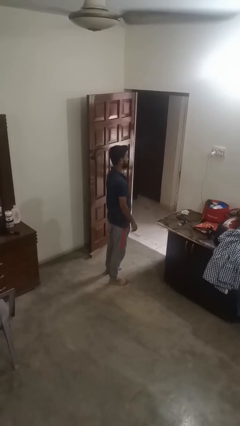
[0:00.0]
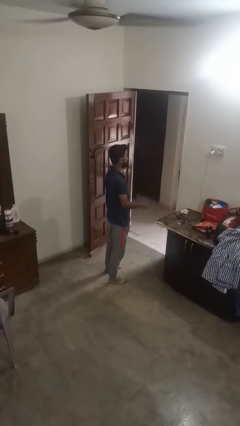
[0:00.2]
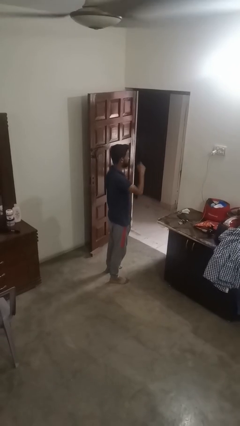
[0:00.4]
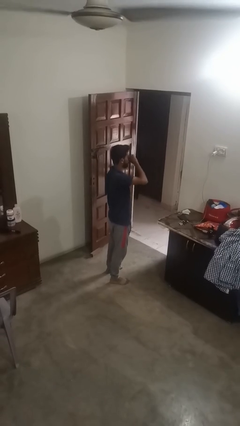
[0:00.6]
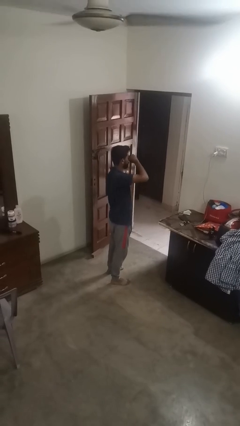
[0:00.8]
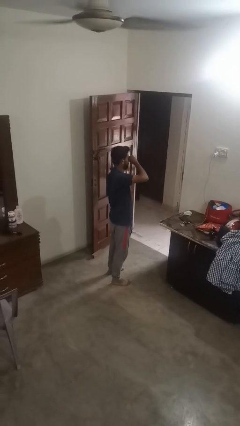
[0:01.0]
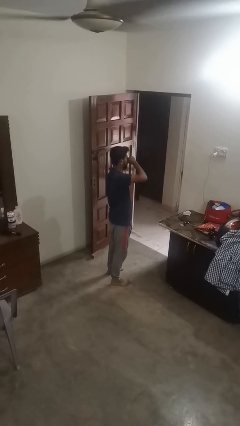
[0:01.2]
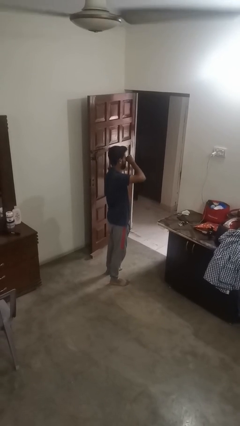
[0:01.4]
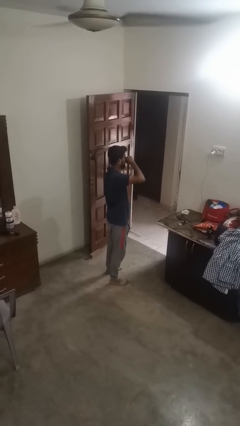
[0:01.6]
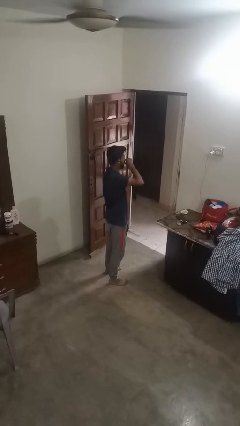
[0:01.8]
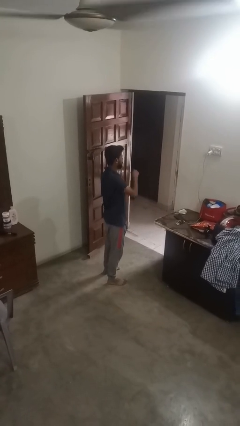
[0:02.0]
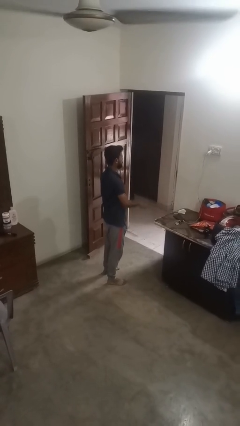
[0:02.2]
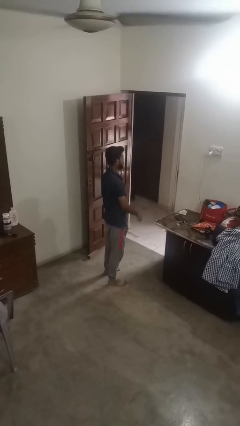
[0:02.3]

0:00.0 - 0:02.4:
person rubs eyes

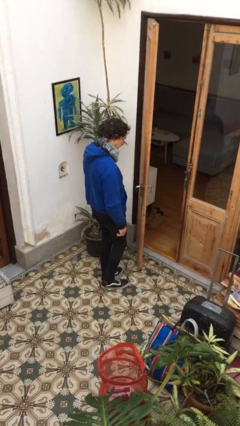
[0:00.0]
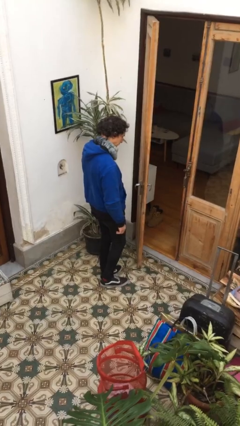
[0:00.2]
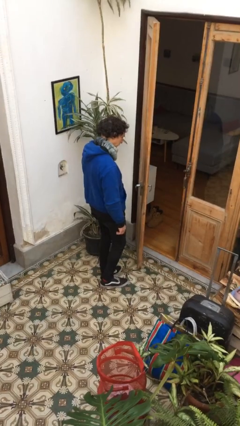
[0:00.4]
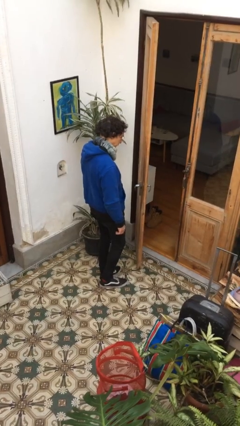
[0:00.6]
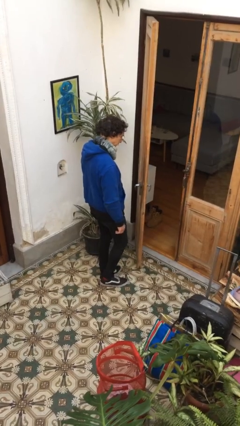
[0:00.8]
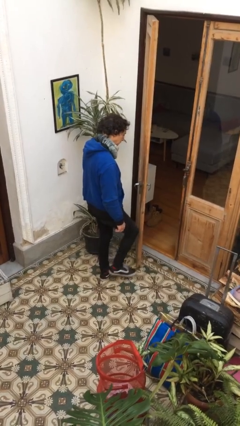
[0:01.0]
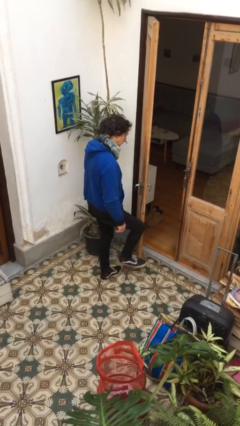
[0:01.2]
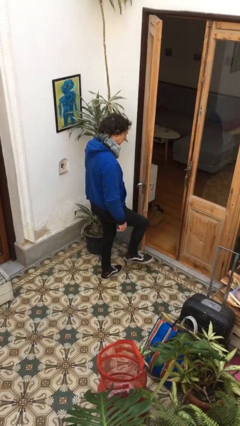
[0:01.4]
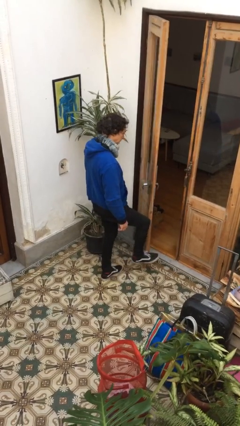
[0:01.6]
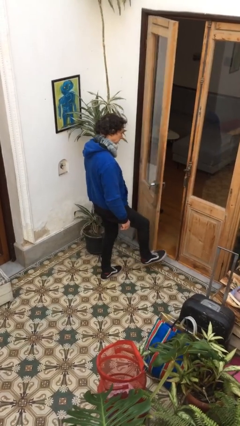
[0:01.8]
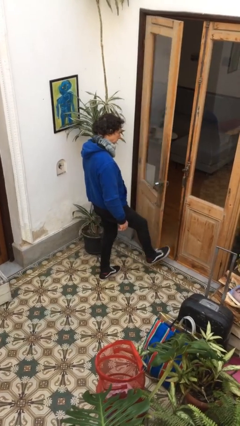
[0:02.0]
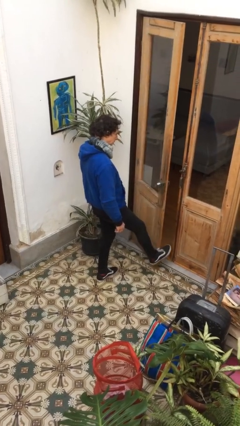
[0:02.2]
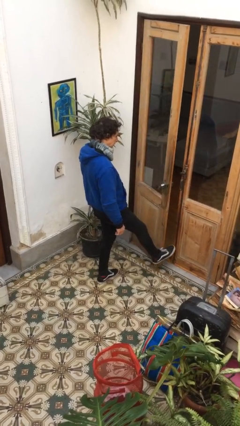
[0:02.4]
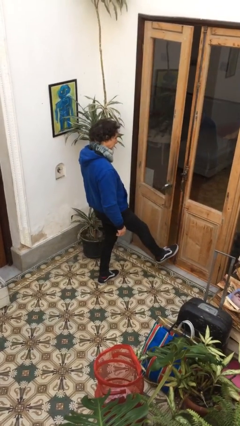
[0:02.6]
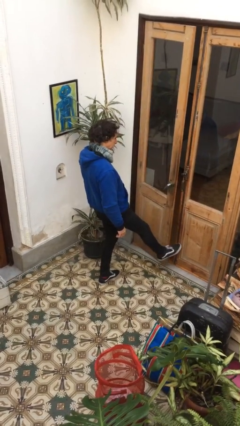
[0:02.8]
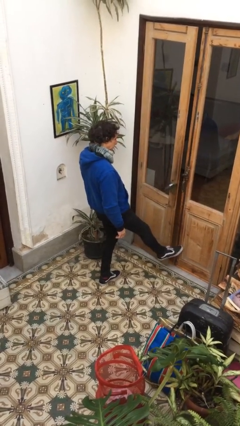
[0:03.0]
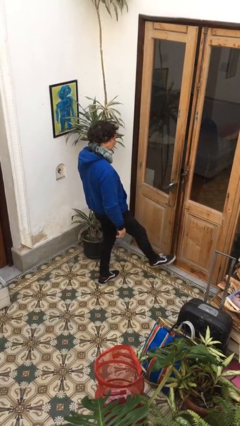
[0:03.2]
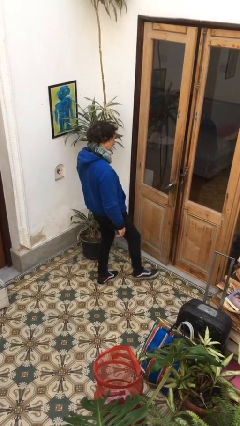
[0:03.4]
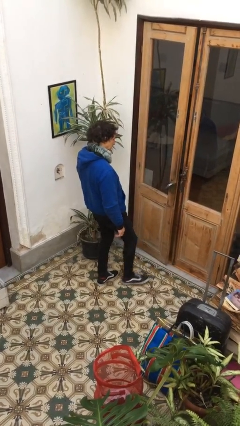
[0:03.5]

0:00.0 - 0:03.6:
person closes door with foot

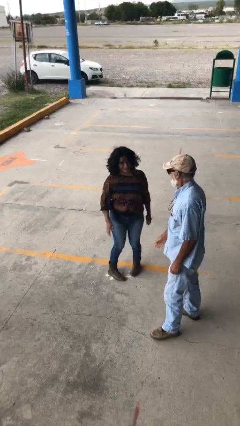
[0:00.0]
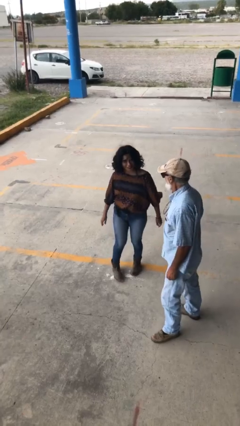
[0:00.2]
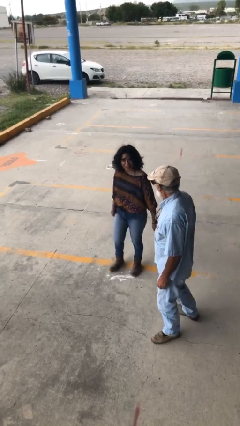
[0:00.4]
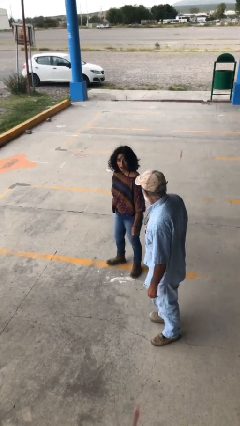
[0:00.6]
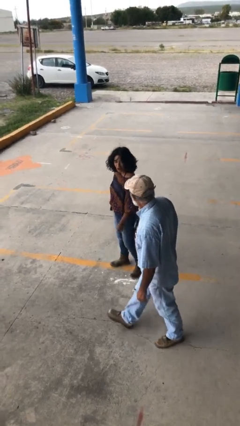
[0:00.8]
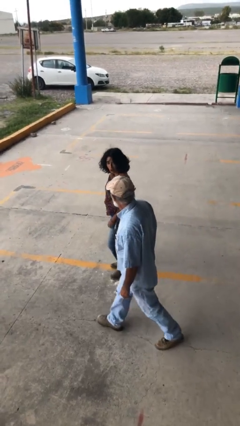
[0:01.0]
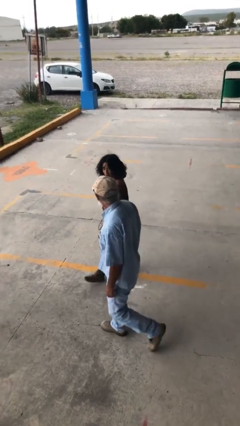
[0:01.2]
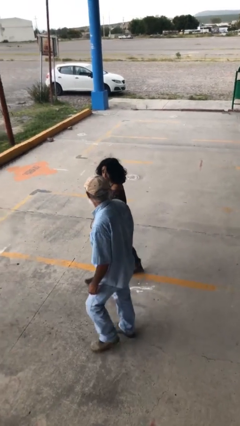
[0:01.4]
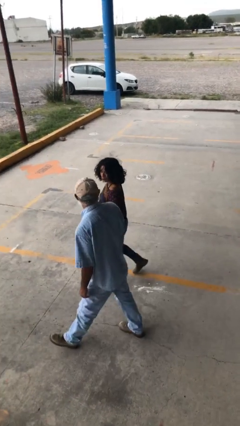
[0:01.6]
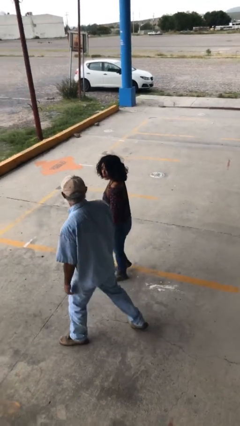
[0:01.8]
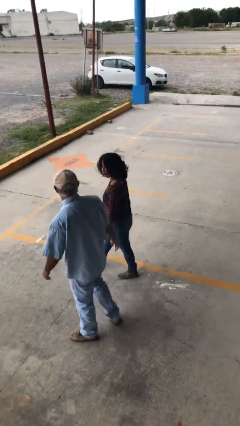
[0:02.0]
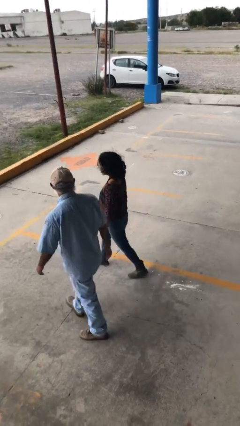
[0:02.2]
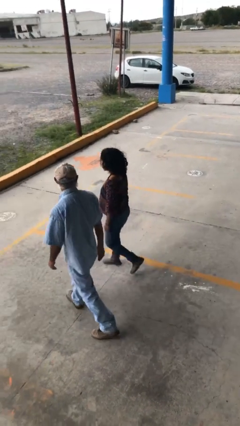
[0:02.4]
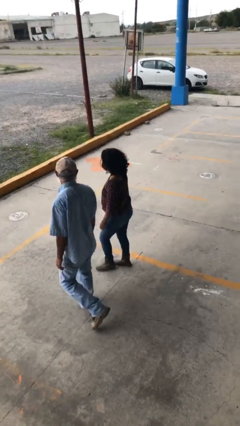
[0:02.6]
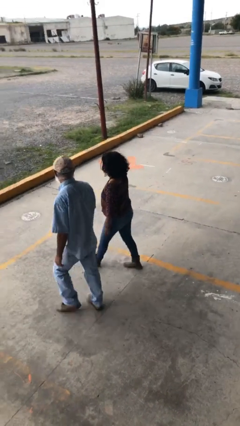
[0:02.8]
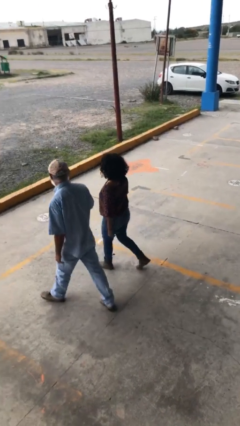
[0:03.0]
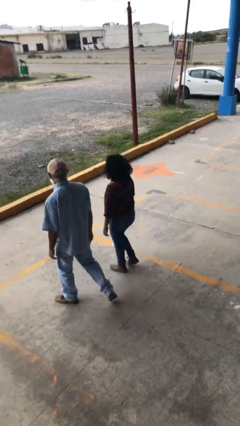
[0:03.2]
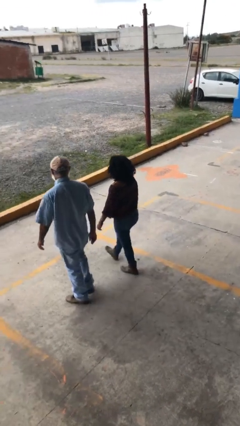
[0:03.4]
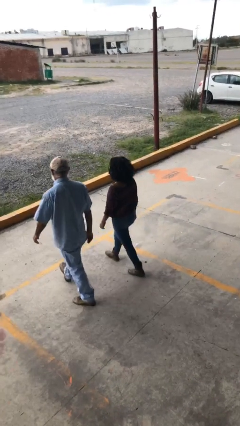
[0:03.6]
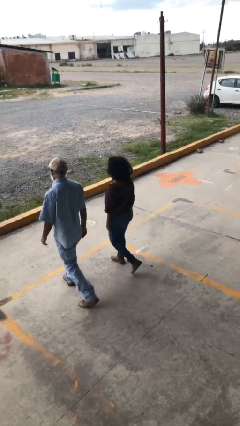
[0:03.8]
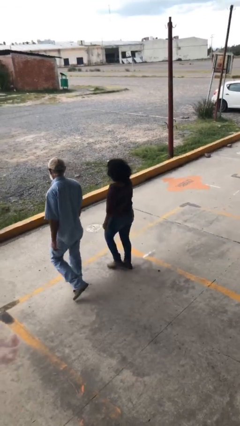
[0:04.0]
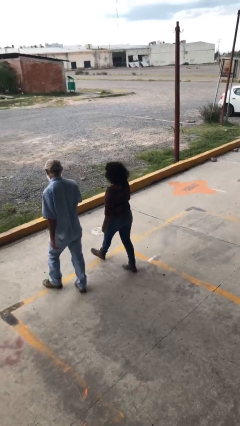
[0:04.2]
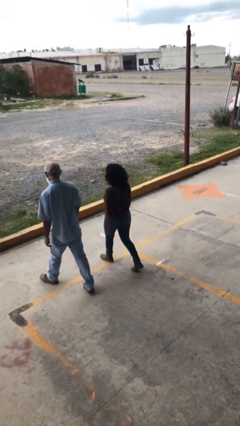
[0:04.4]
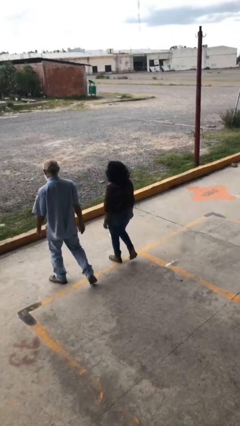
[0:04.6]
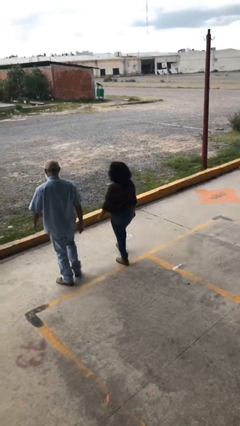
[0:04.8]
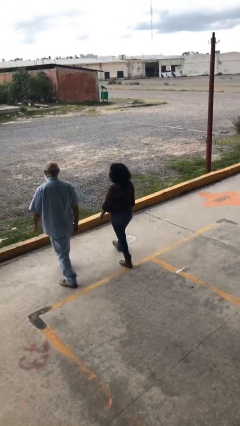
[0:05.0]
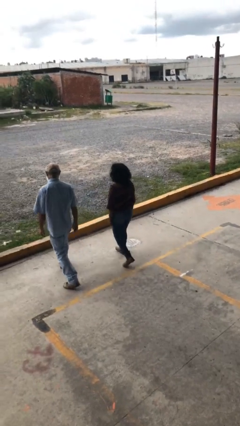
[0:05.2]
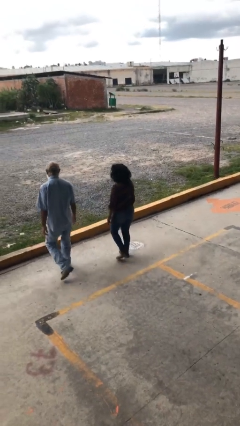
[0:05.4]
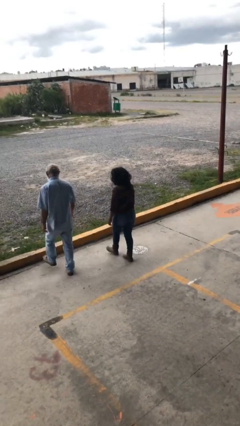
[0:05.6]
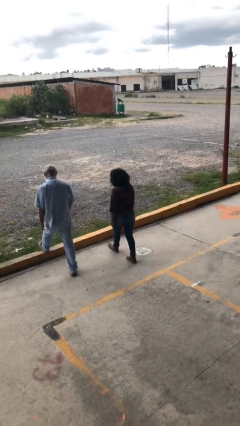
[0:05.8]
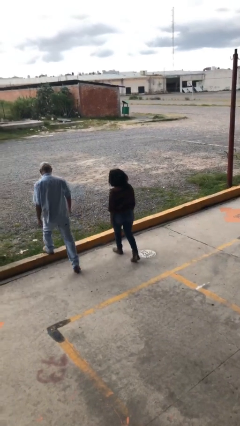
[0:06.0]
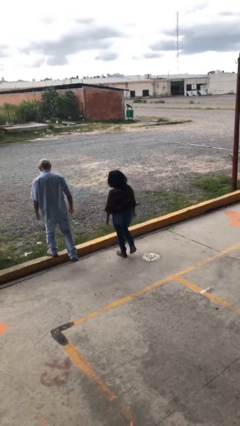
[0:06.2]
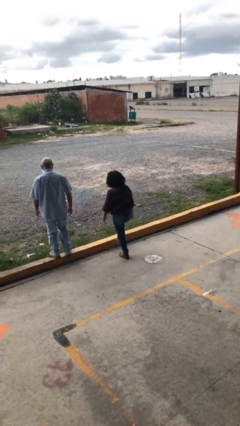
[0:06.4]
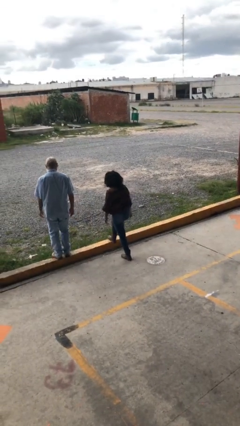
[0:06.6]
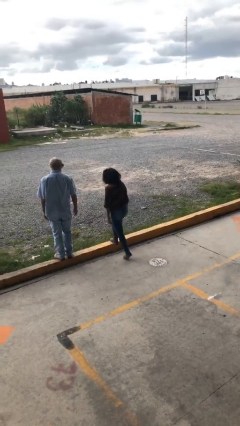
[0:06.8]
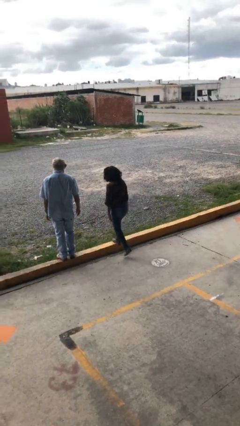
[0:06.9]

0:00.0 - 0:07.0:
person talks to person

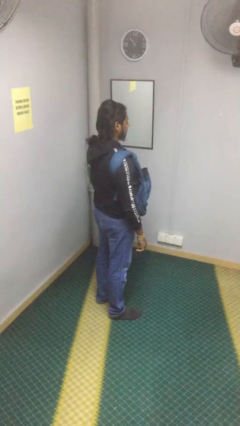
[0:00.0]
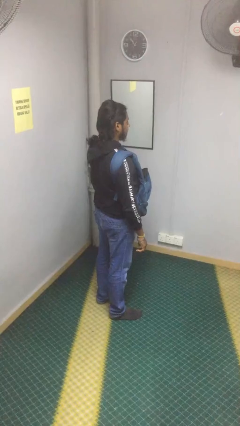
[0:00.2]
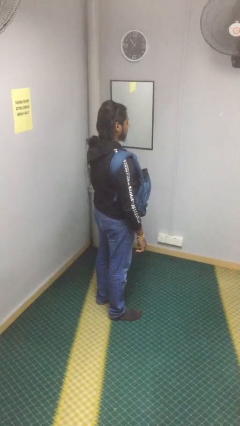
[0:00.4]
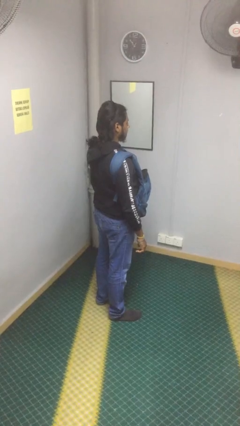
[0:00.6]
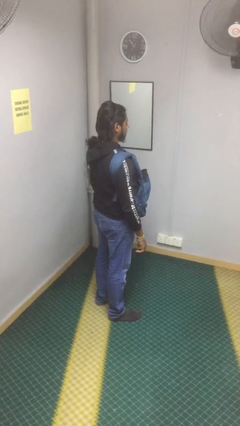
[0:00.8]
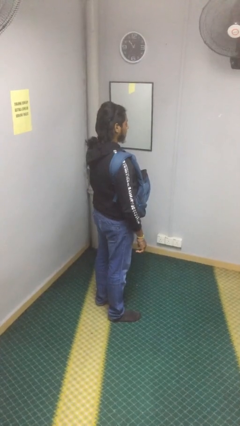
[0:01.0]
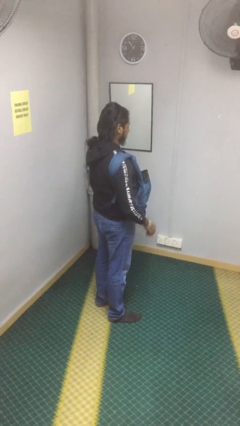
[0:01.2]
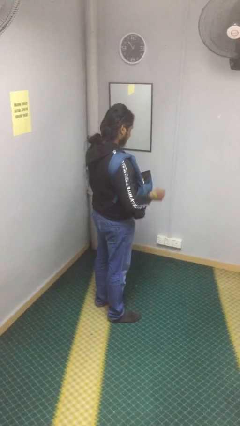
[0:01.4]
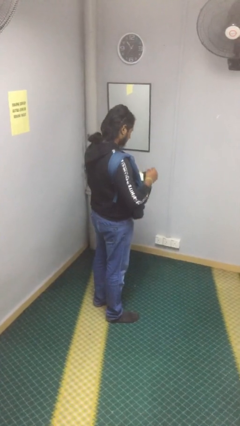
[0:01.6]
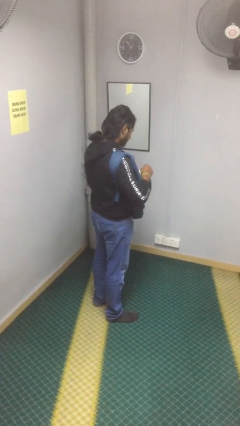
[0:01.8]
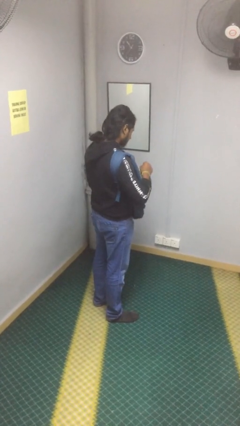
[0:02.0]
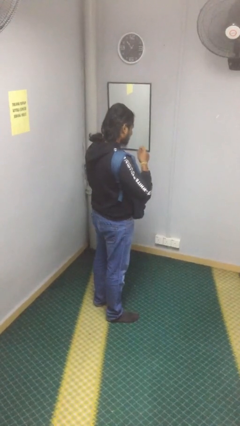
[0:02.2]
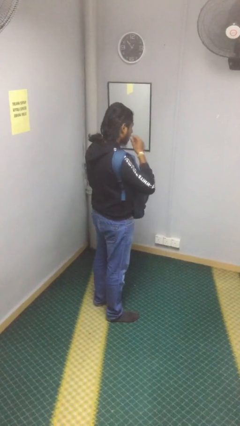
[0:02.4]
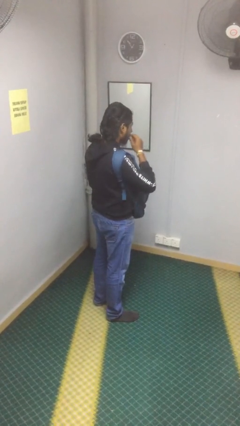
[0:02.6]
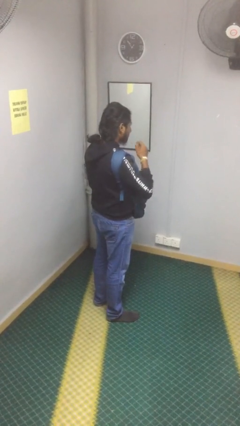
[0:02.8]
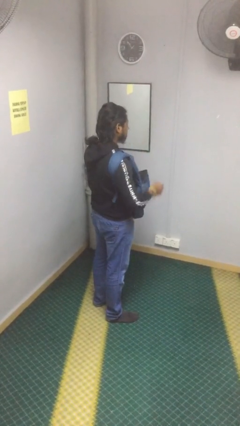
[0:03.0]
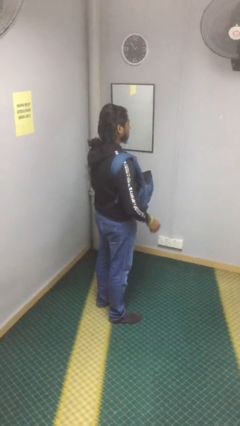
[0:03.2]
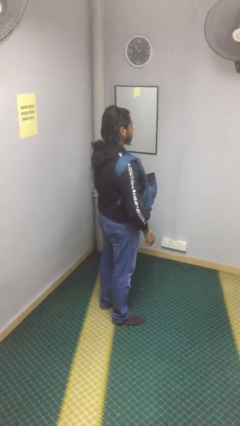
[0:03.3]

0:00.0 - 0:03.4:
person eats snack from bag

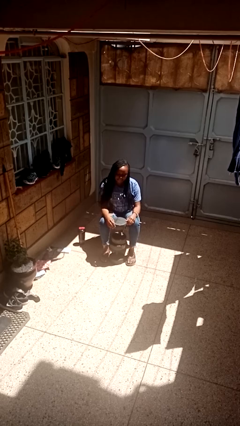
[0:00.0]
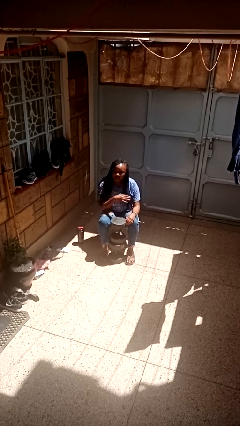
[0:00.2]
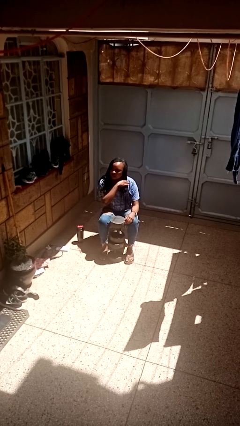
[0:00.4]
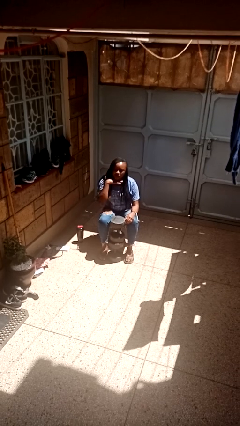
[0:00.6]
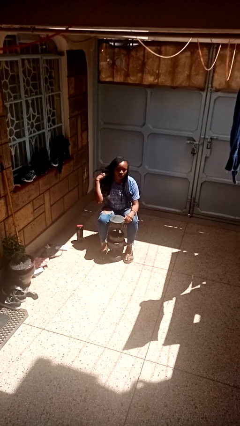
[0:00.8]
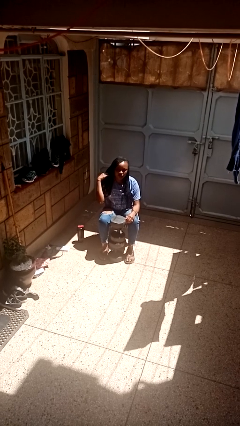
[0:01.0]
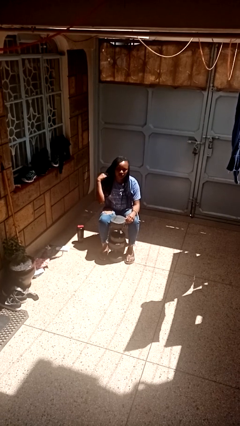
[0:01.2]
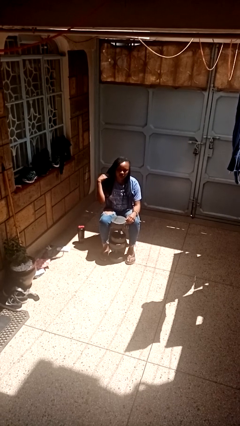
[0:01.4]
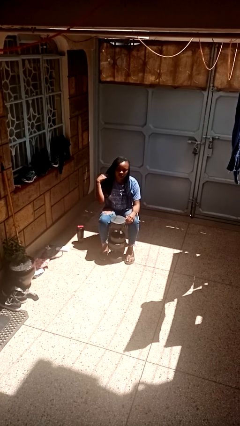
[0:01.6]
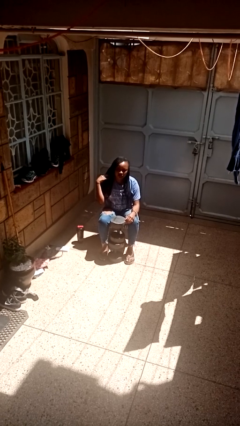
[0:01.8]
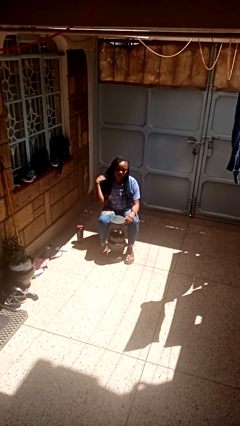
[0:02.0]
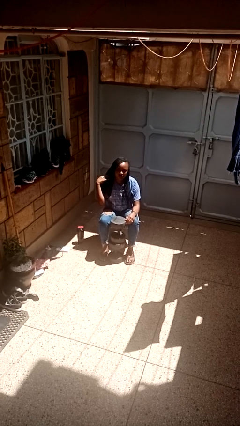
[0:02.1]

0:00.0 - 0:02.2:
person gestures cut
